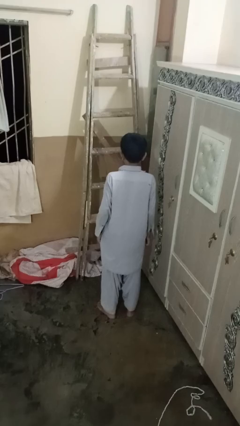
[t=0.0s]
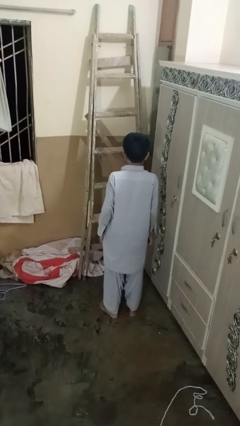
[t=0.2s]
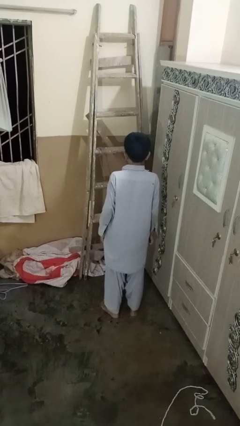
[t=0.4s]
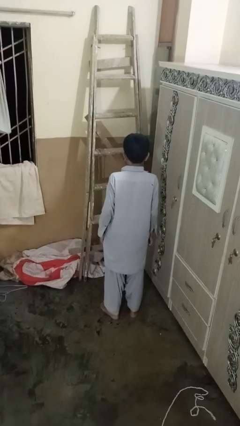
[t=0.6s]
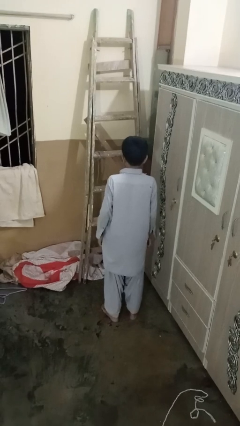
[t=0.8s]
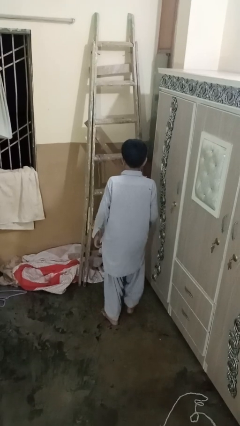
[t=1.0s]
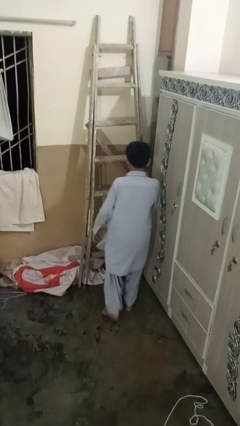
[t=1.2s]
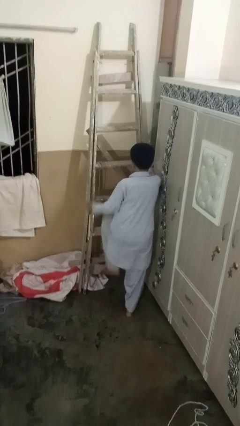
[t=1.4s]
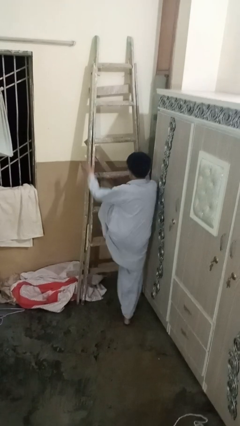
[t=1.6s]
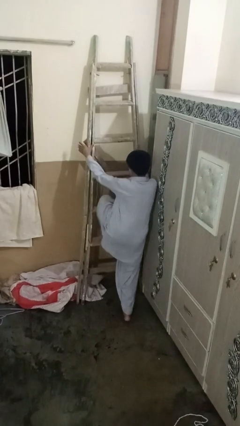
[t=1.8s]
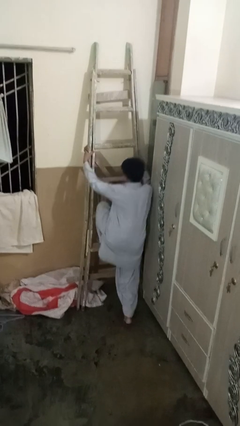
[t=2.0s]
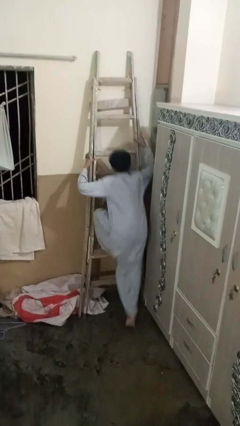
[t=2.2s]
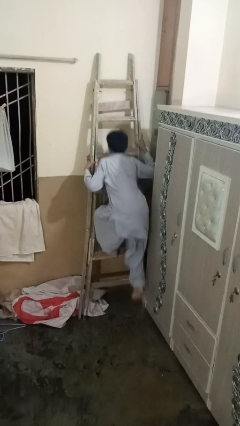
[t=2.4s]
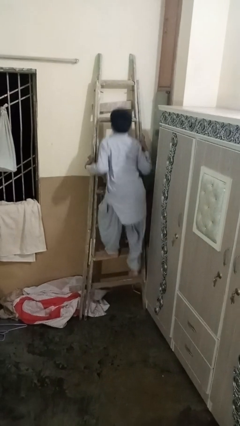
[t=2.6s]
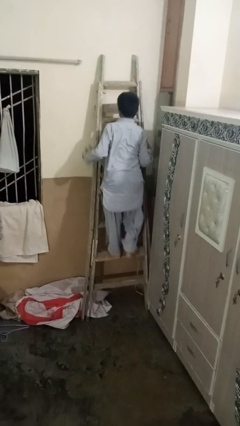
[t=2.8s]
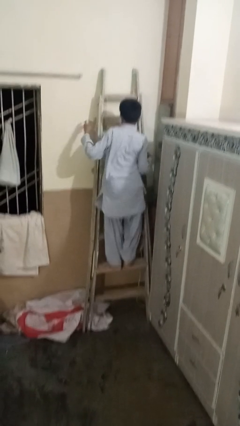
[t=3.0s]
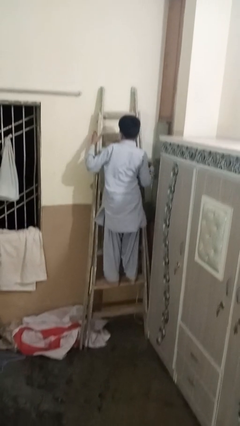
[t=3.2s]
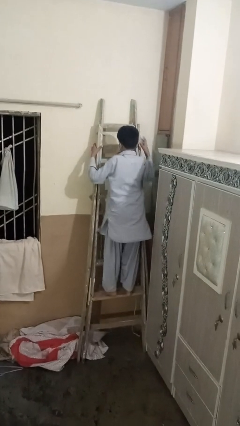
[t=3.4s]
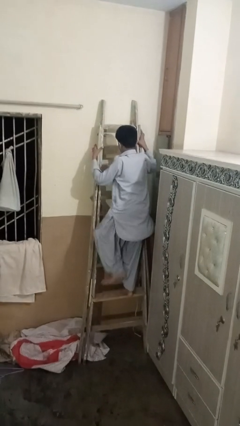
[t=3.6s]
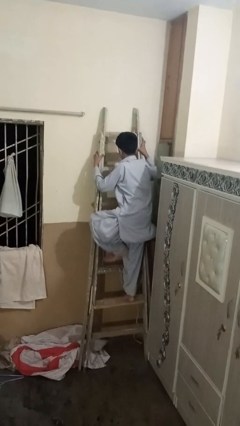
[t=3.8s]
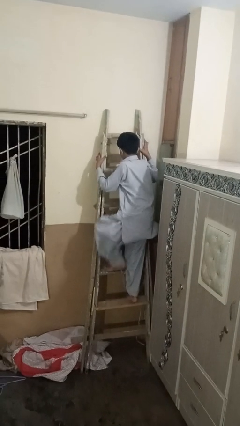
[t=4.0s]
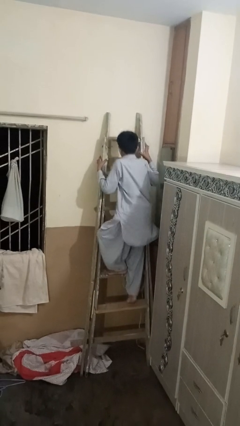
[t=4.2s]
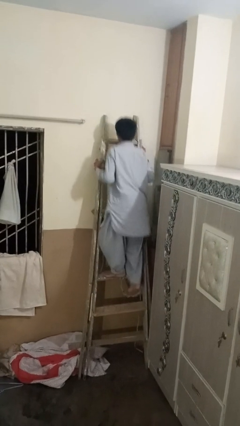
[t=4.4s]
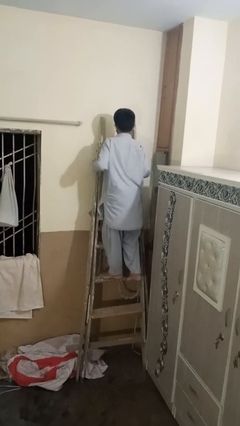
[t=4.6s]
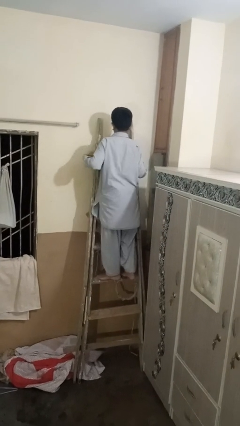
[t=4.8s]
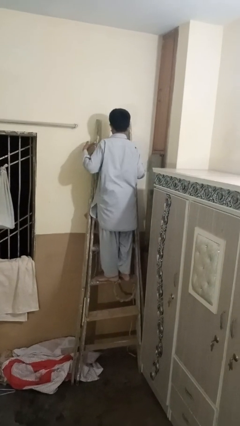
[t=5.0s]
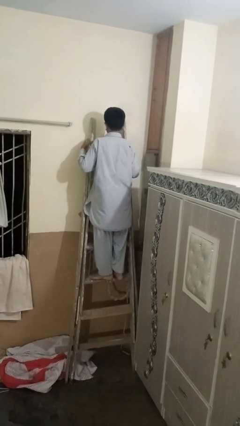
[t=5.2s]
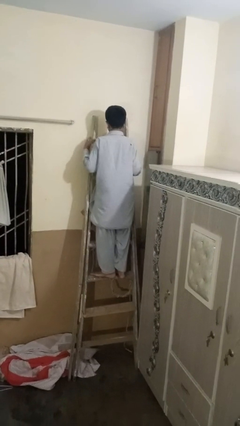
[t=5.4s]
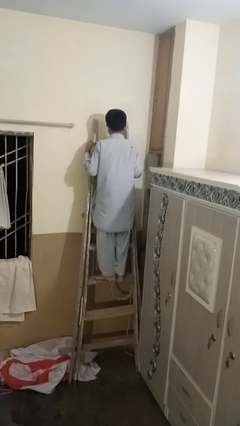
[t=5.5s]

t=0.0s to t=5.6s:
person climbs up ladder

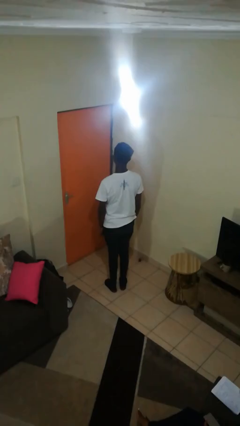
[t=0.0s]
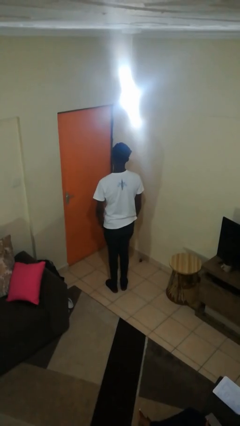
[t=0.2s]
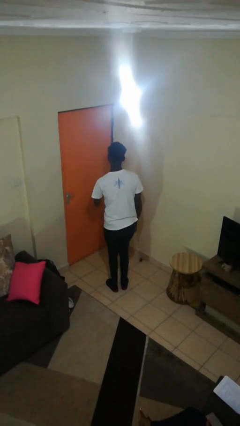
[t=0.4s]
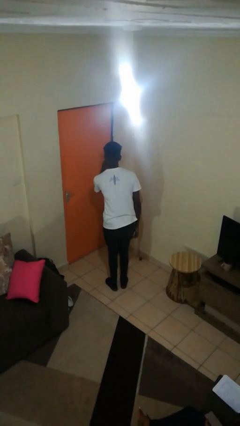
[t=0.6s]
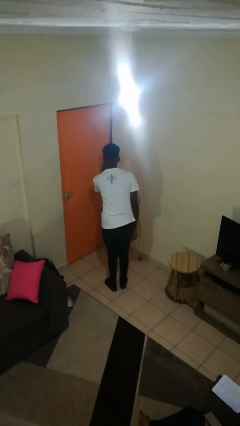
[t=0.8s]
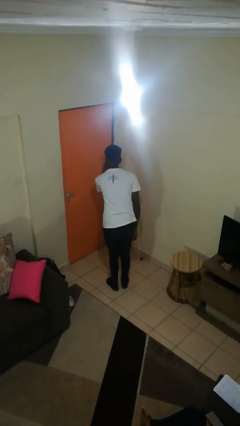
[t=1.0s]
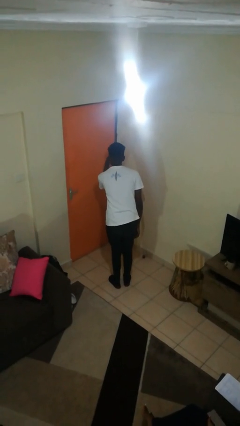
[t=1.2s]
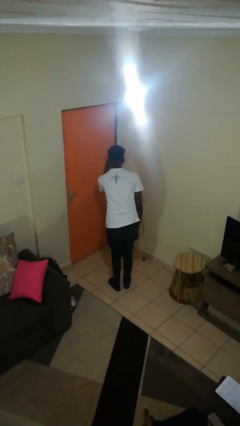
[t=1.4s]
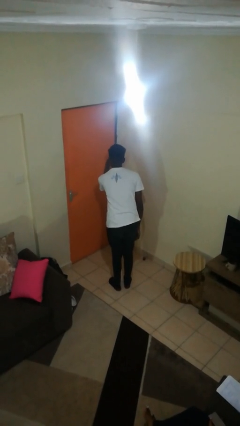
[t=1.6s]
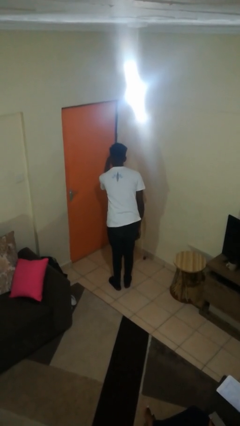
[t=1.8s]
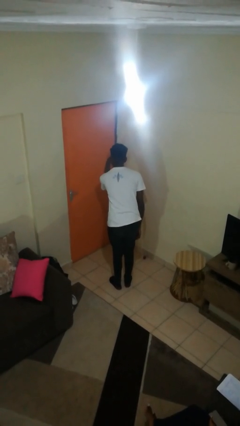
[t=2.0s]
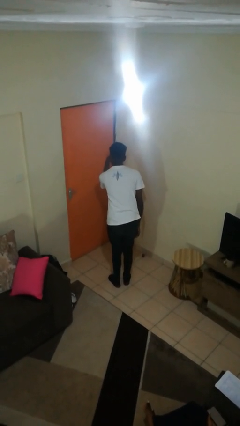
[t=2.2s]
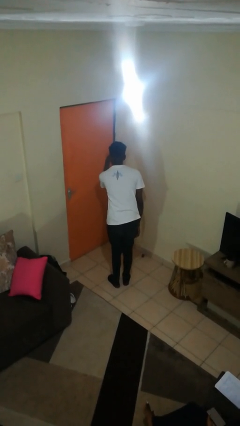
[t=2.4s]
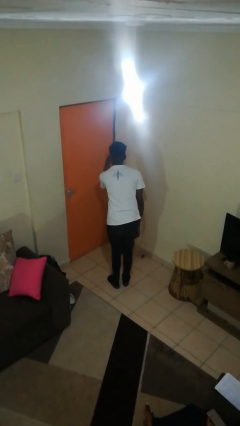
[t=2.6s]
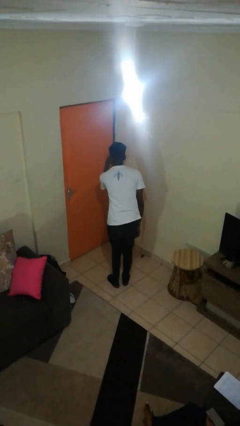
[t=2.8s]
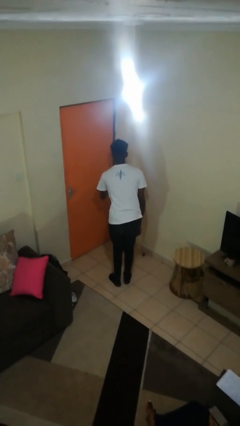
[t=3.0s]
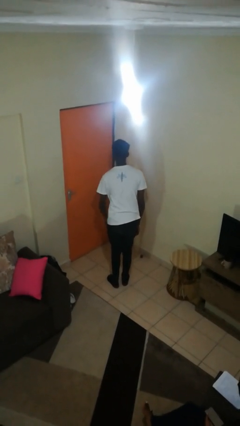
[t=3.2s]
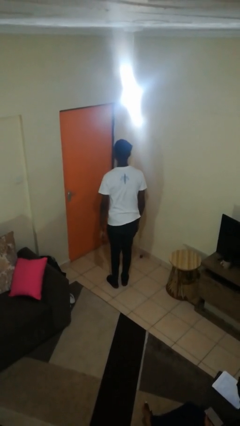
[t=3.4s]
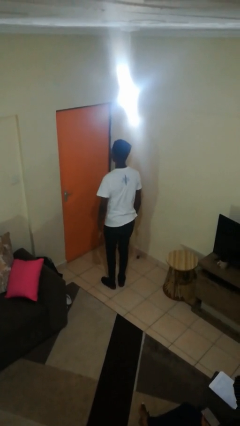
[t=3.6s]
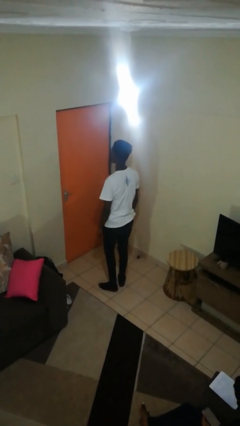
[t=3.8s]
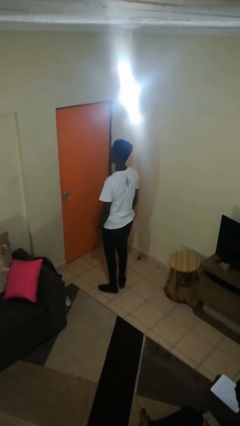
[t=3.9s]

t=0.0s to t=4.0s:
person gestures watch closely

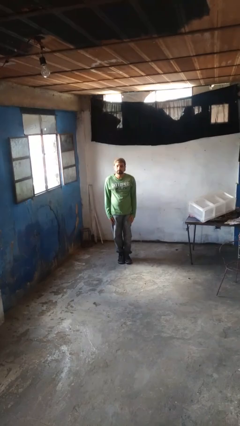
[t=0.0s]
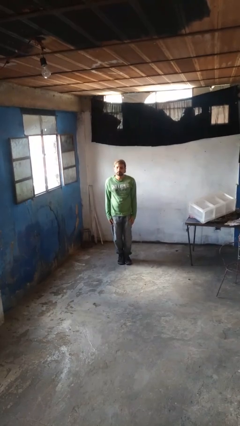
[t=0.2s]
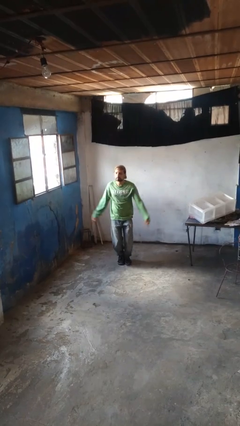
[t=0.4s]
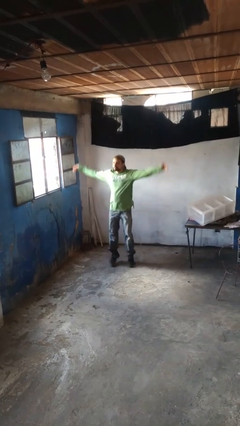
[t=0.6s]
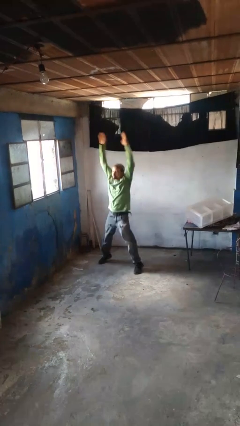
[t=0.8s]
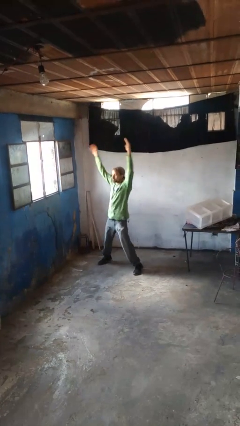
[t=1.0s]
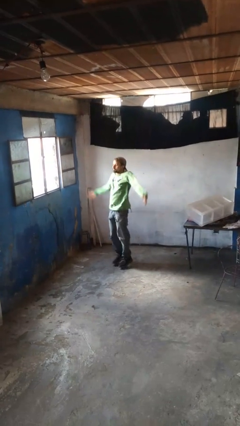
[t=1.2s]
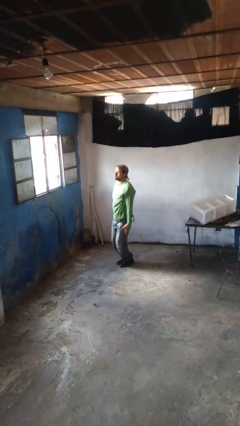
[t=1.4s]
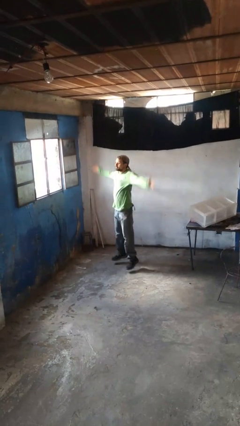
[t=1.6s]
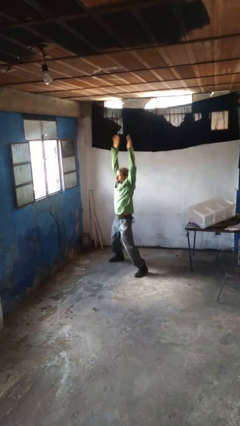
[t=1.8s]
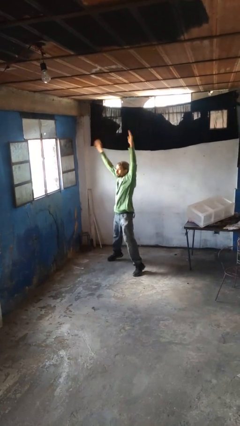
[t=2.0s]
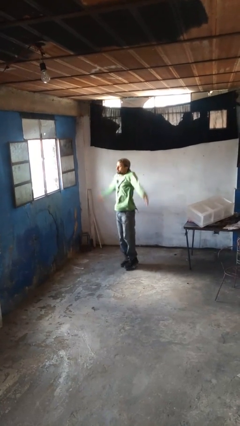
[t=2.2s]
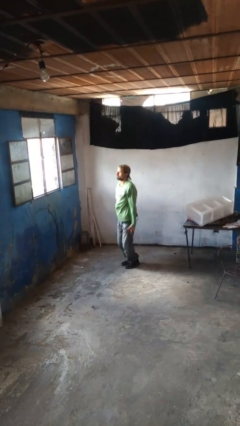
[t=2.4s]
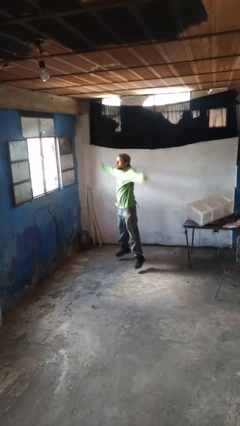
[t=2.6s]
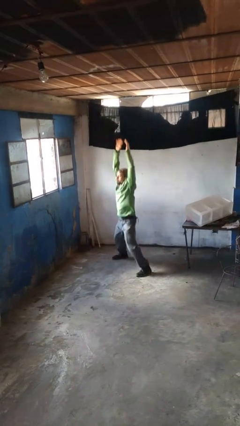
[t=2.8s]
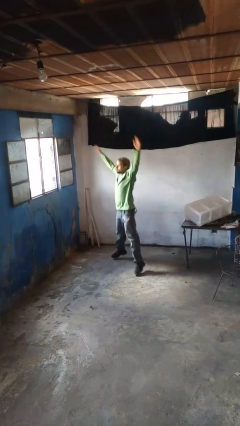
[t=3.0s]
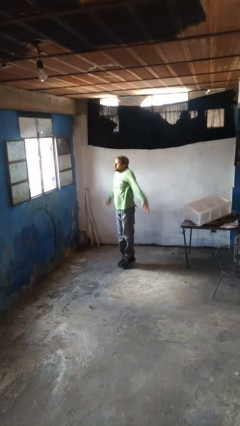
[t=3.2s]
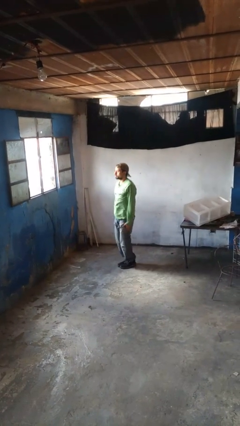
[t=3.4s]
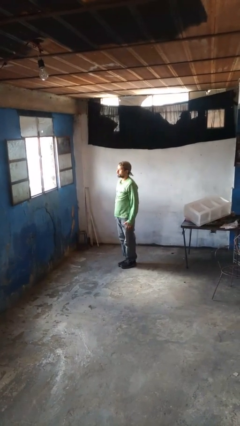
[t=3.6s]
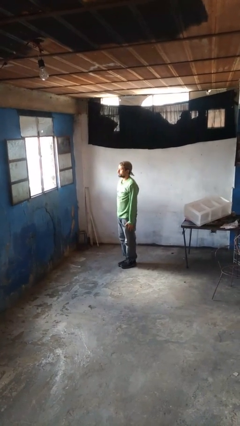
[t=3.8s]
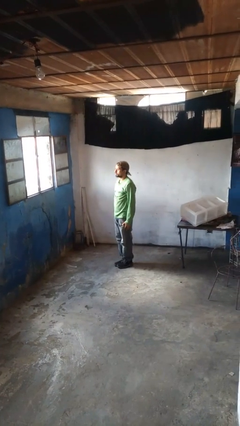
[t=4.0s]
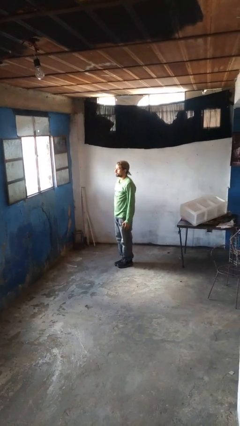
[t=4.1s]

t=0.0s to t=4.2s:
person exercises with jumping jacks

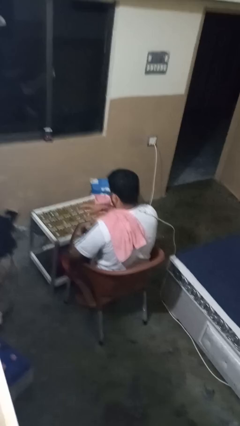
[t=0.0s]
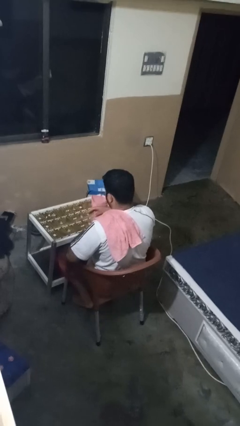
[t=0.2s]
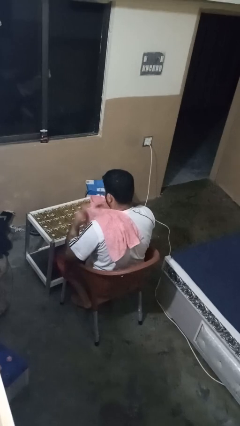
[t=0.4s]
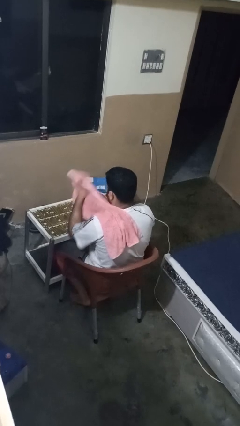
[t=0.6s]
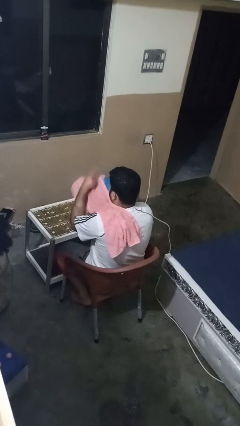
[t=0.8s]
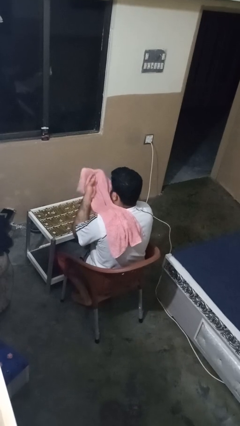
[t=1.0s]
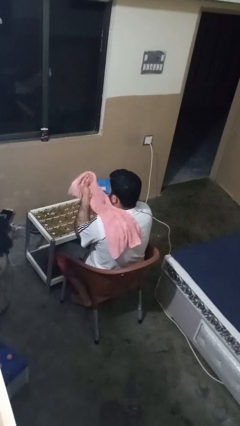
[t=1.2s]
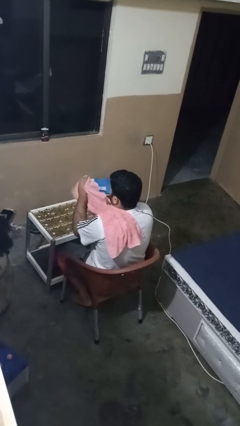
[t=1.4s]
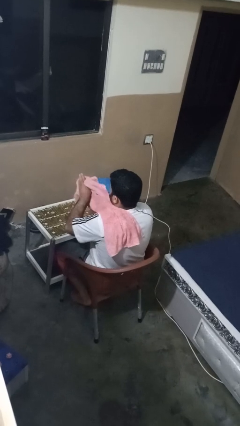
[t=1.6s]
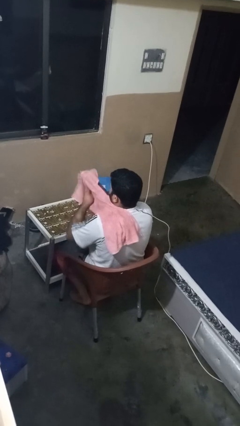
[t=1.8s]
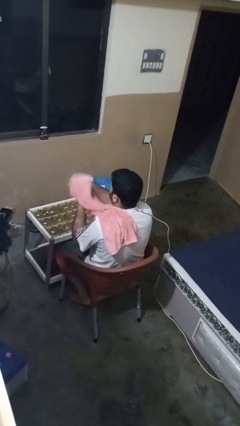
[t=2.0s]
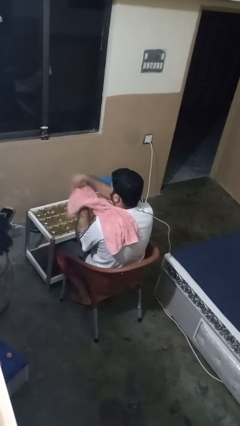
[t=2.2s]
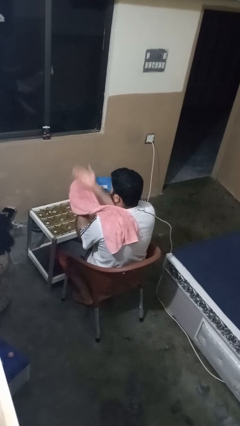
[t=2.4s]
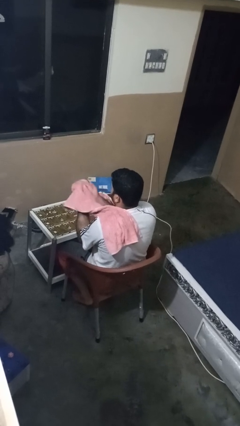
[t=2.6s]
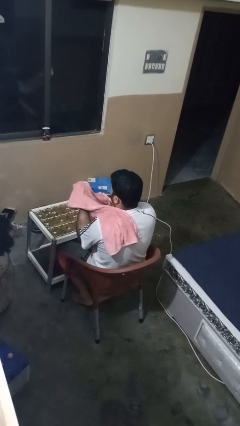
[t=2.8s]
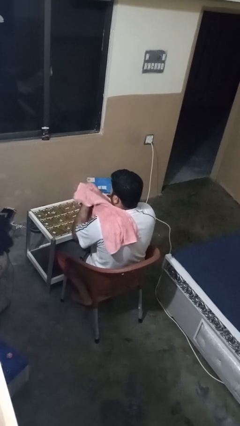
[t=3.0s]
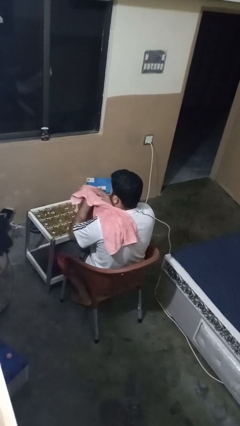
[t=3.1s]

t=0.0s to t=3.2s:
person dries hands with towel

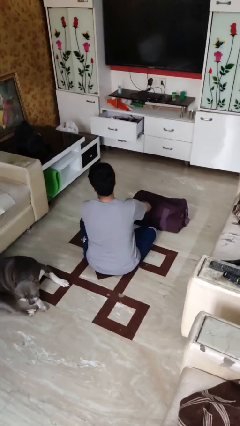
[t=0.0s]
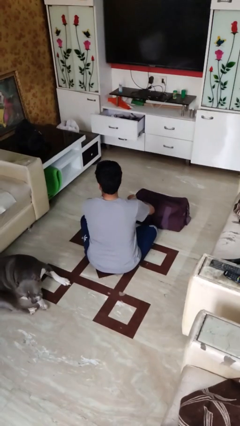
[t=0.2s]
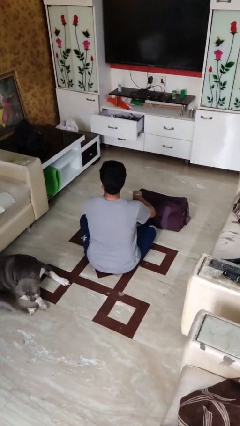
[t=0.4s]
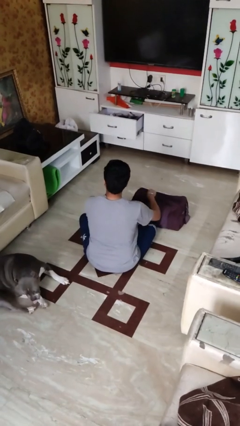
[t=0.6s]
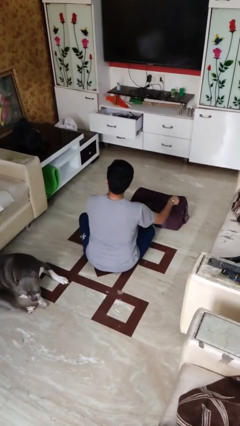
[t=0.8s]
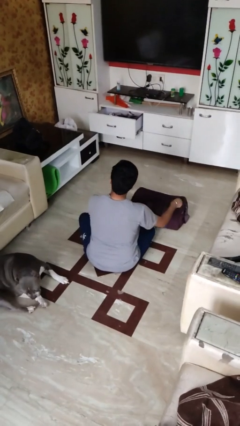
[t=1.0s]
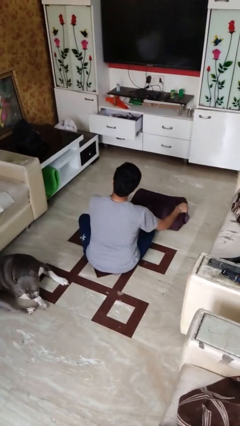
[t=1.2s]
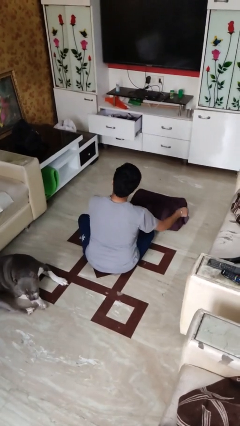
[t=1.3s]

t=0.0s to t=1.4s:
person opens suitcase
